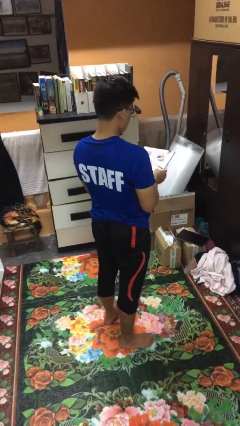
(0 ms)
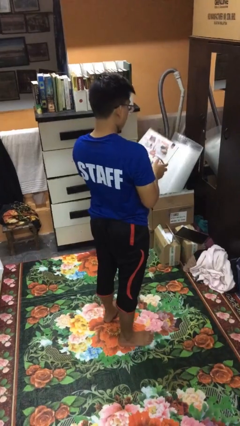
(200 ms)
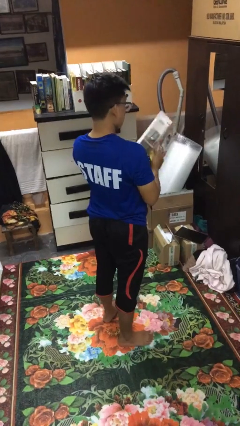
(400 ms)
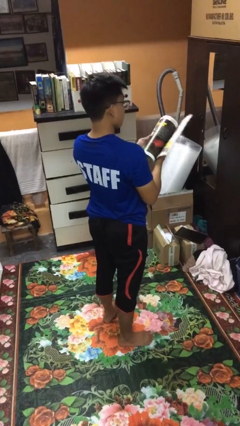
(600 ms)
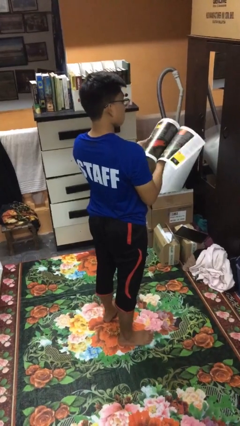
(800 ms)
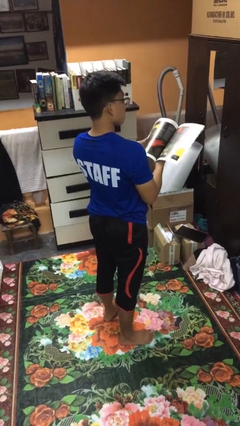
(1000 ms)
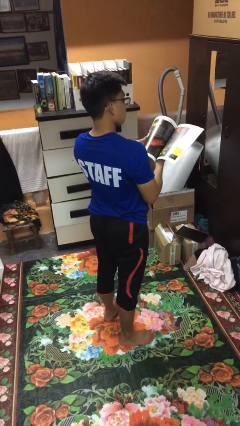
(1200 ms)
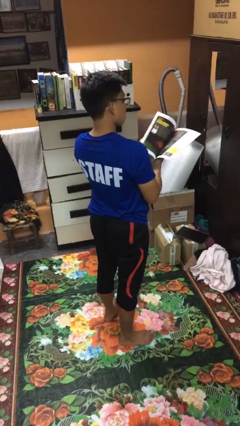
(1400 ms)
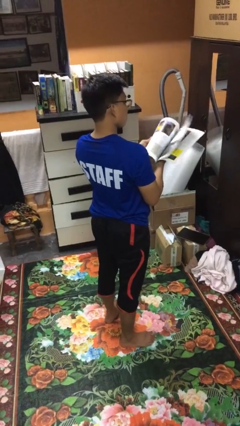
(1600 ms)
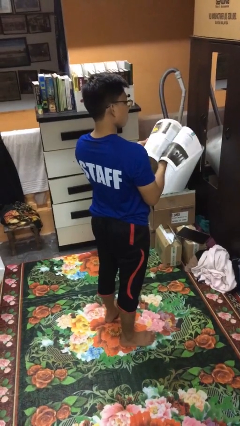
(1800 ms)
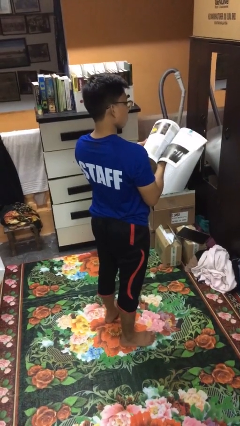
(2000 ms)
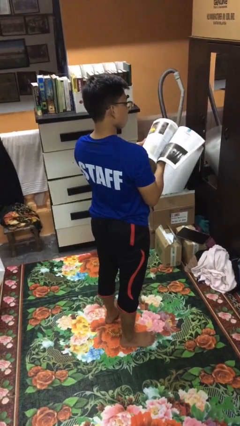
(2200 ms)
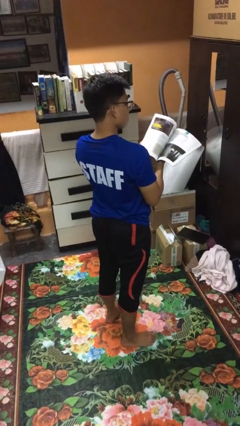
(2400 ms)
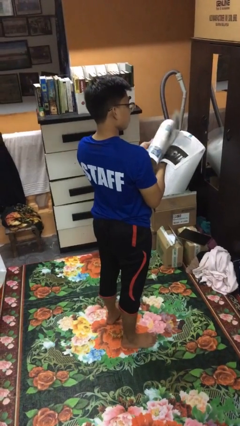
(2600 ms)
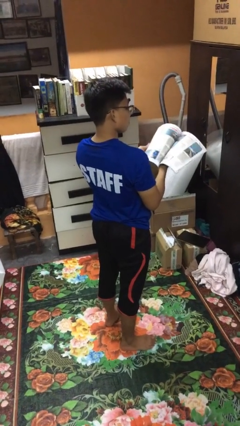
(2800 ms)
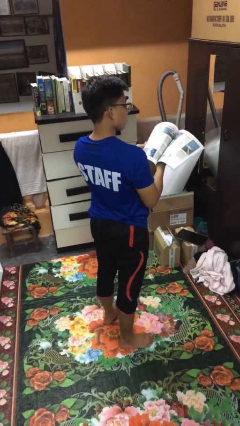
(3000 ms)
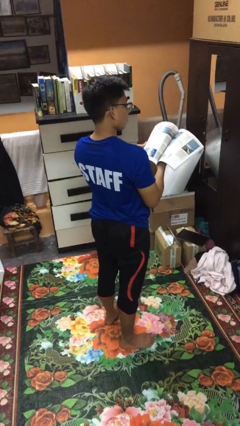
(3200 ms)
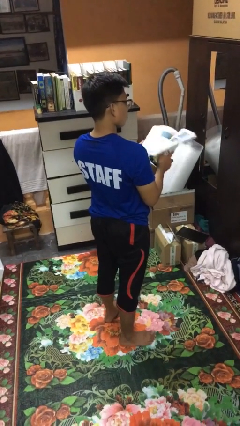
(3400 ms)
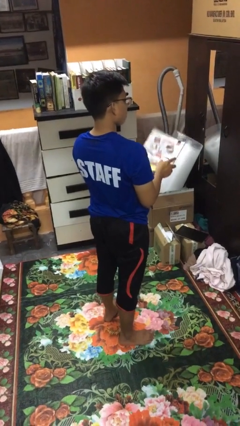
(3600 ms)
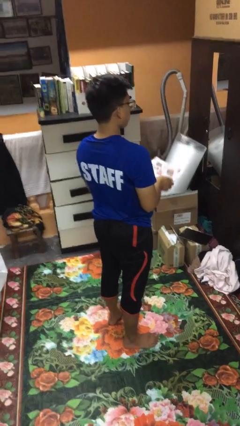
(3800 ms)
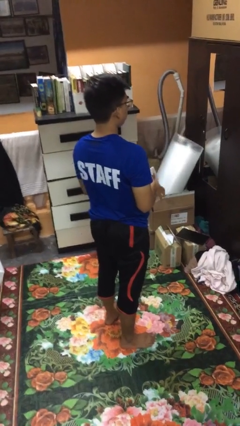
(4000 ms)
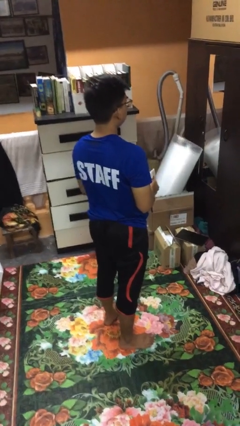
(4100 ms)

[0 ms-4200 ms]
person reads magazine

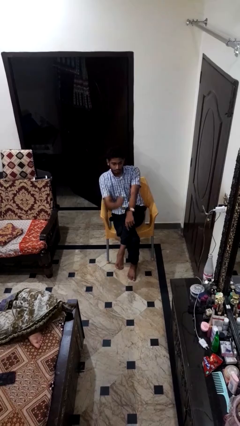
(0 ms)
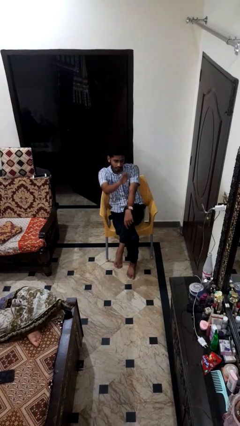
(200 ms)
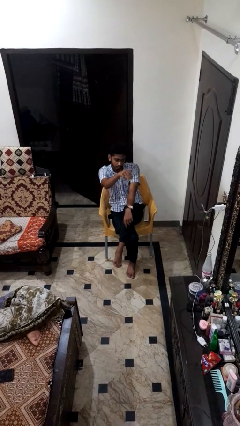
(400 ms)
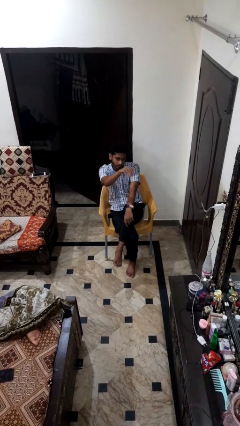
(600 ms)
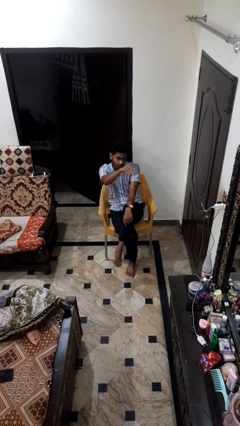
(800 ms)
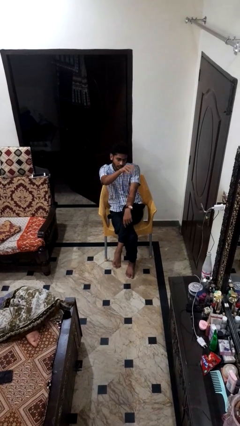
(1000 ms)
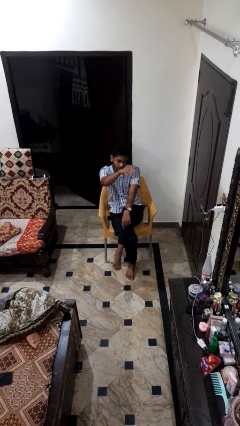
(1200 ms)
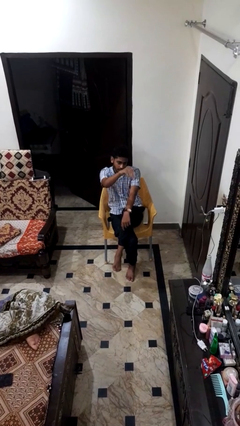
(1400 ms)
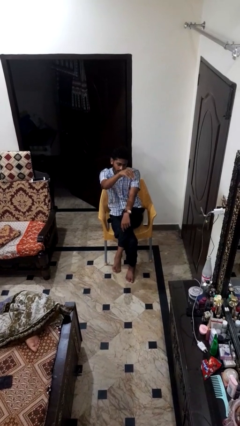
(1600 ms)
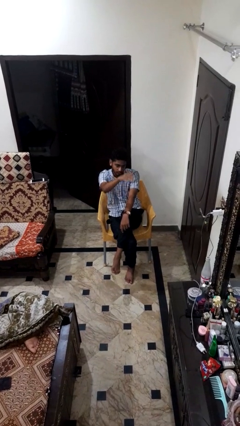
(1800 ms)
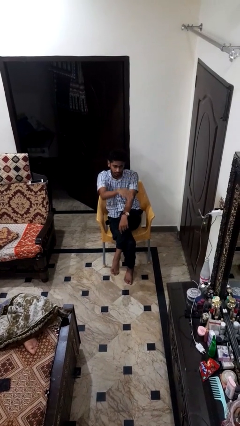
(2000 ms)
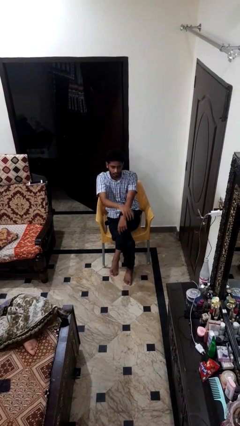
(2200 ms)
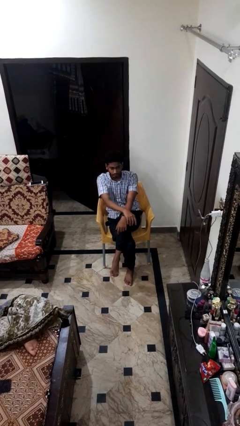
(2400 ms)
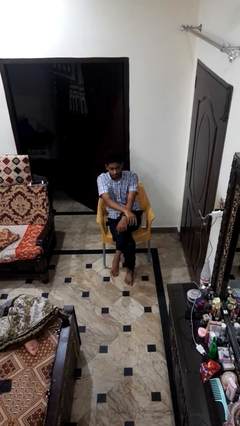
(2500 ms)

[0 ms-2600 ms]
person gestures come here

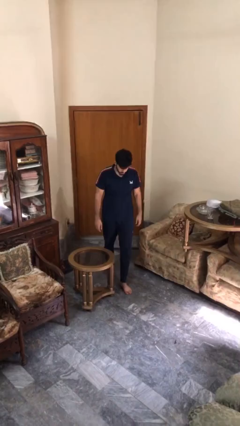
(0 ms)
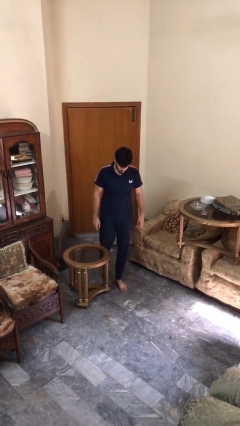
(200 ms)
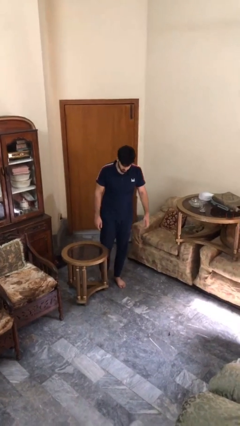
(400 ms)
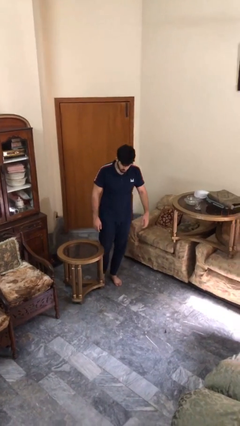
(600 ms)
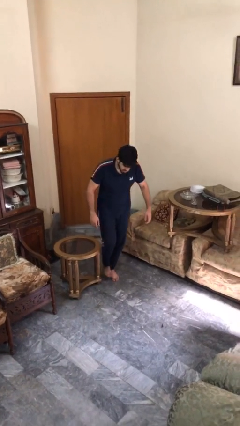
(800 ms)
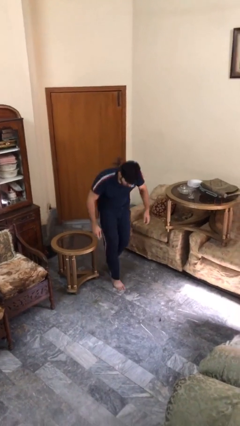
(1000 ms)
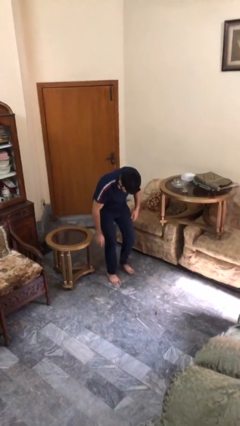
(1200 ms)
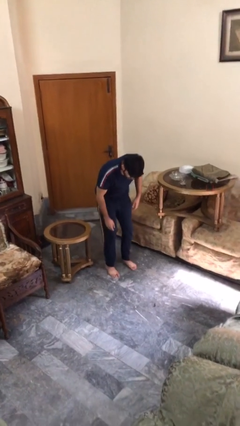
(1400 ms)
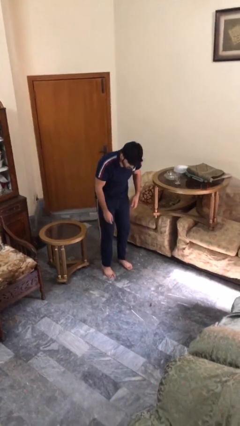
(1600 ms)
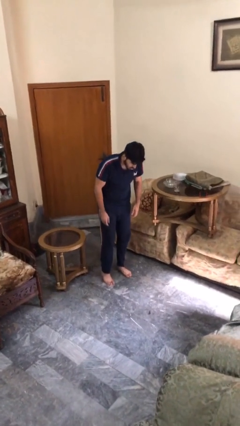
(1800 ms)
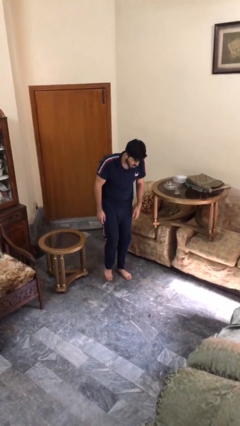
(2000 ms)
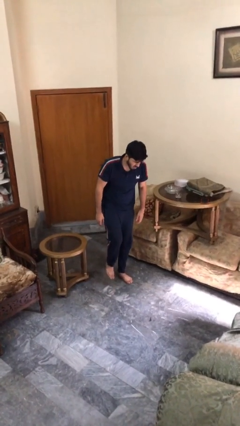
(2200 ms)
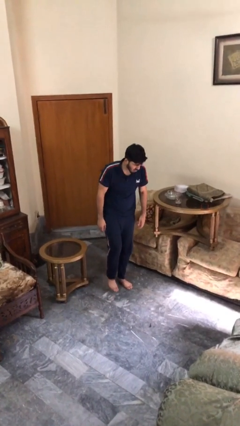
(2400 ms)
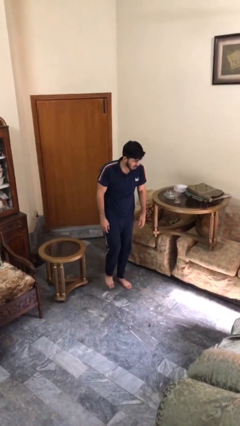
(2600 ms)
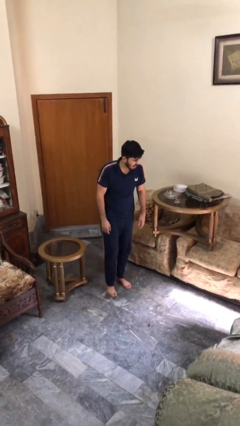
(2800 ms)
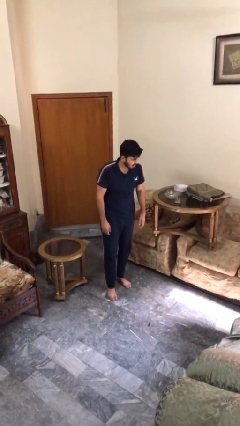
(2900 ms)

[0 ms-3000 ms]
person stubs toe

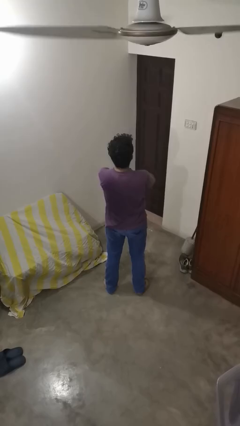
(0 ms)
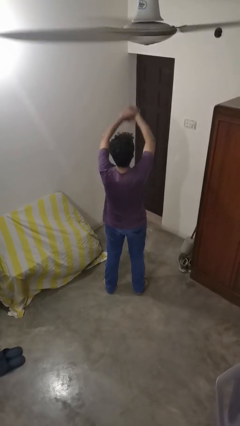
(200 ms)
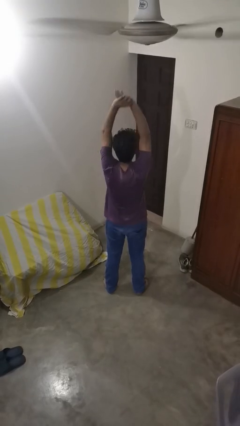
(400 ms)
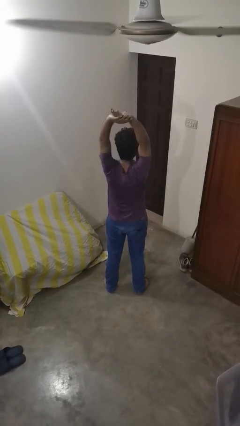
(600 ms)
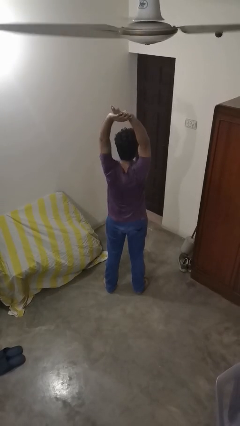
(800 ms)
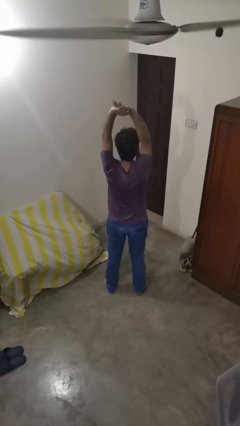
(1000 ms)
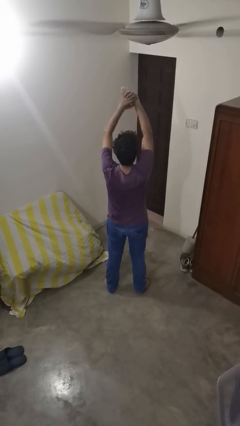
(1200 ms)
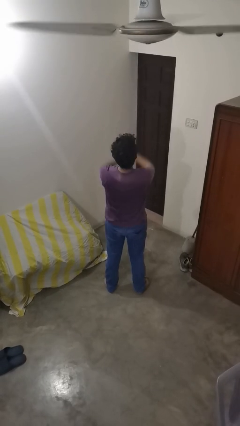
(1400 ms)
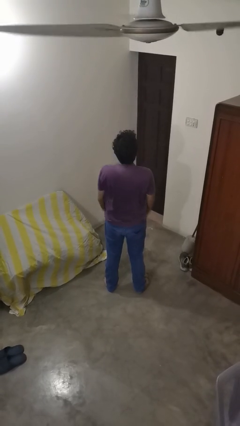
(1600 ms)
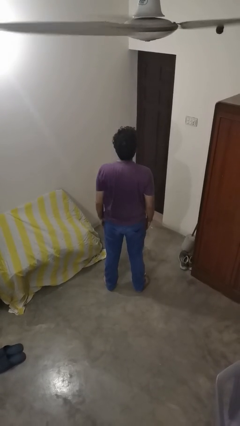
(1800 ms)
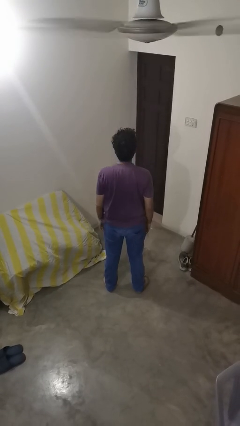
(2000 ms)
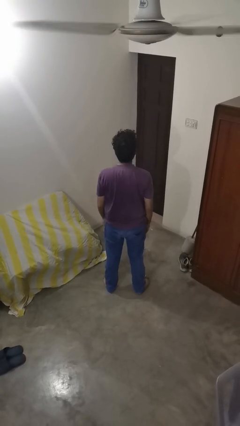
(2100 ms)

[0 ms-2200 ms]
person stretches arms over head

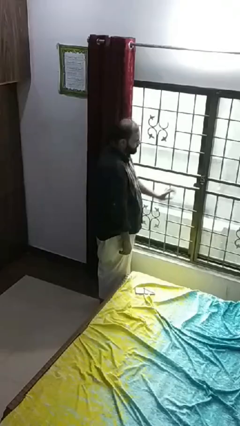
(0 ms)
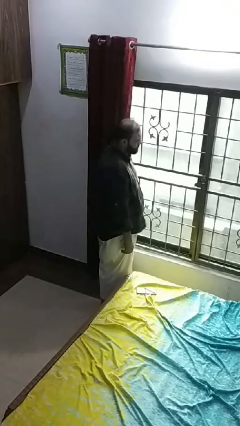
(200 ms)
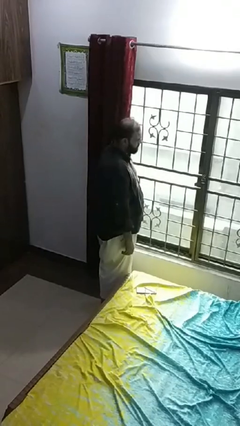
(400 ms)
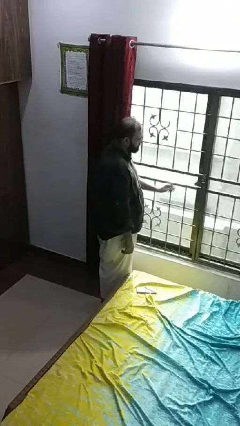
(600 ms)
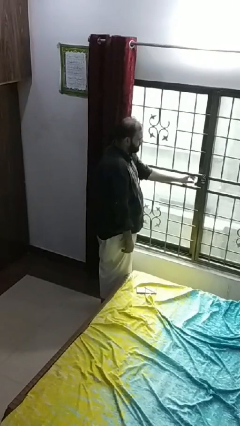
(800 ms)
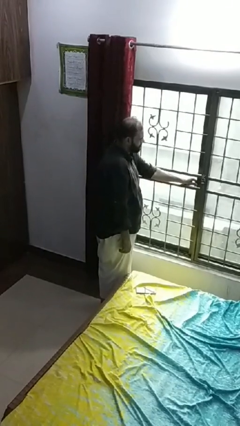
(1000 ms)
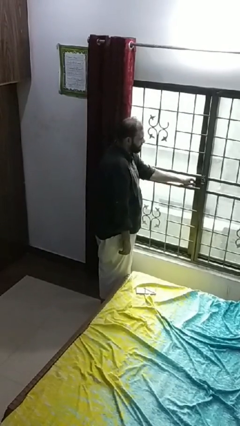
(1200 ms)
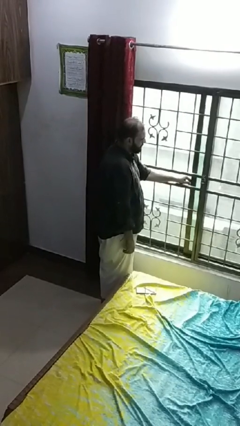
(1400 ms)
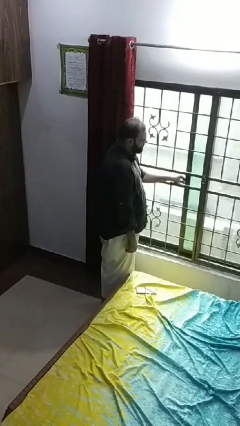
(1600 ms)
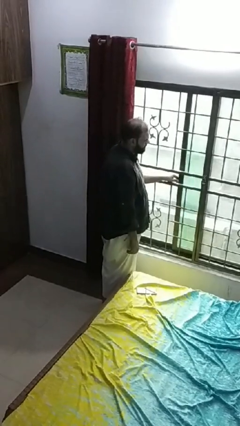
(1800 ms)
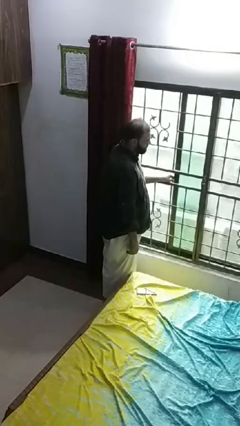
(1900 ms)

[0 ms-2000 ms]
person opens home window

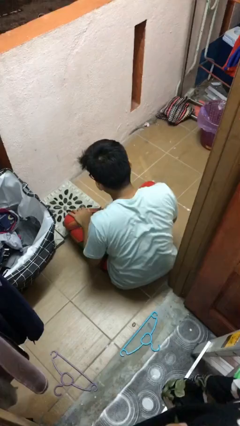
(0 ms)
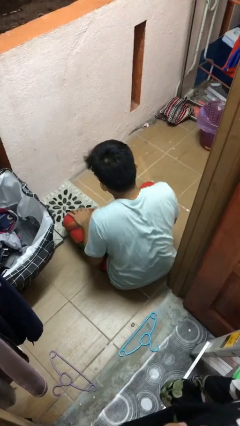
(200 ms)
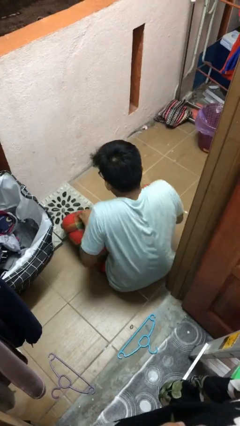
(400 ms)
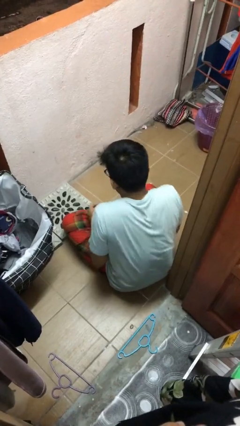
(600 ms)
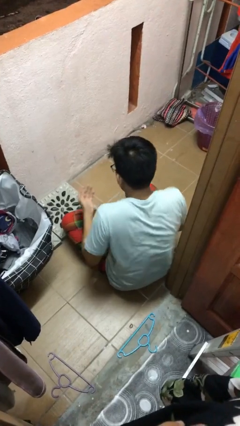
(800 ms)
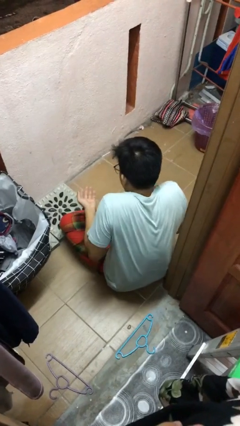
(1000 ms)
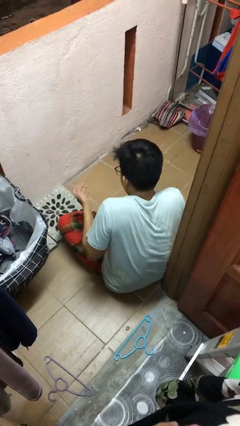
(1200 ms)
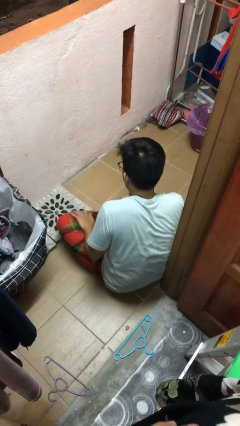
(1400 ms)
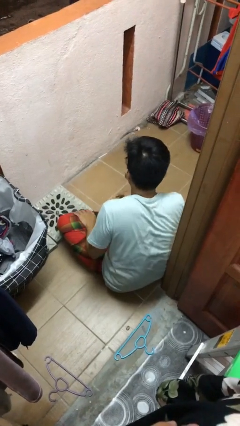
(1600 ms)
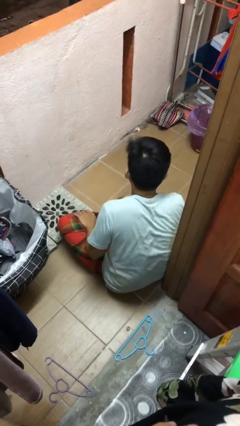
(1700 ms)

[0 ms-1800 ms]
person shrugs

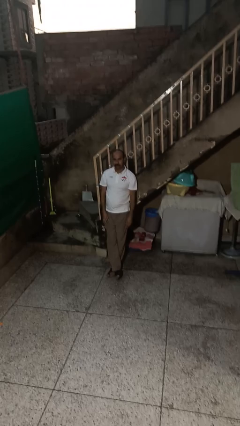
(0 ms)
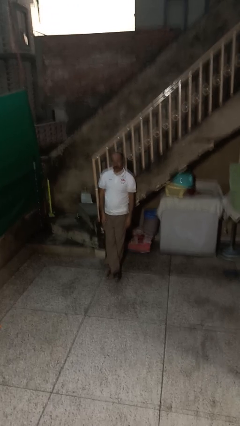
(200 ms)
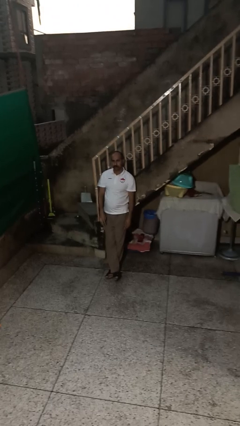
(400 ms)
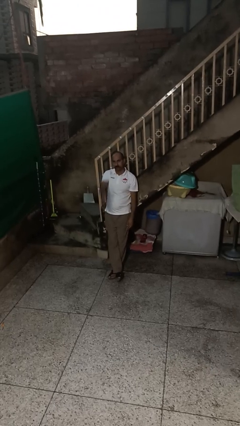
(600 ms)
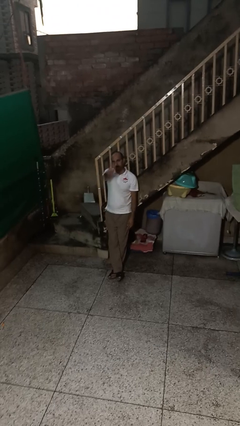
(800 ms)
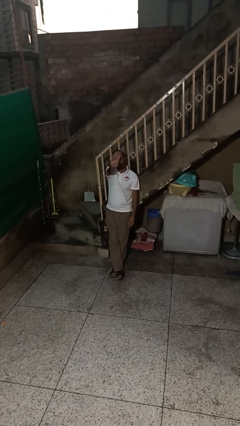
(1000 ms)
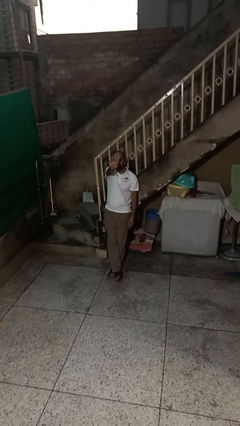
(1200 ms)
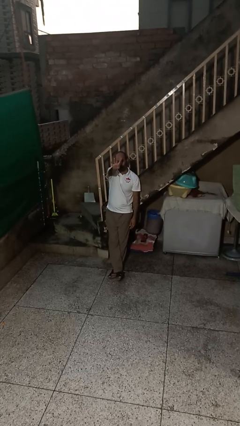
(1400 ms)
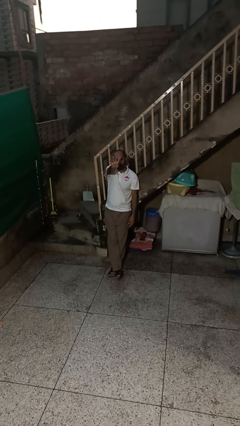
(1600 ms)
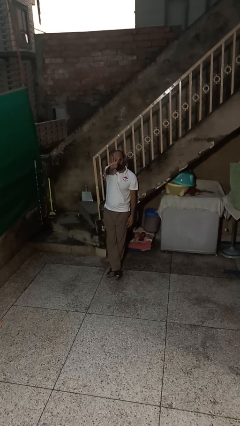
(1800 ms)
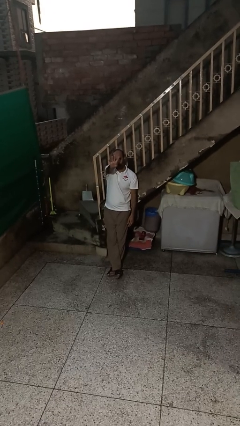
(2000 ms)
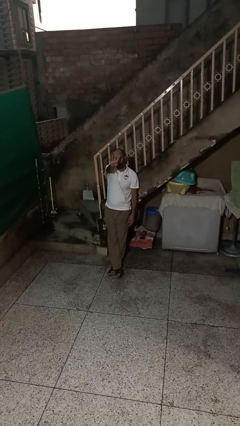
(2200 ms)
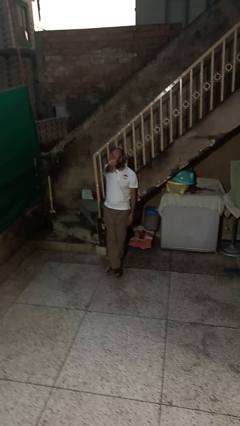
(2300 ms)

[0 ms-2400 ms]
person gestures number four
